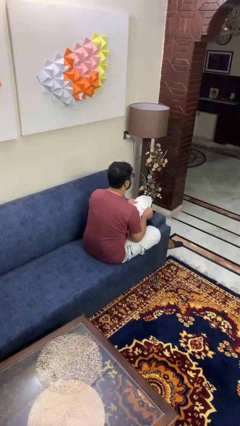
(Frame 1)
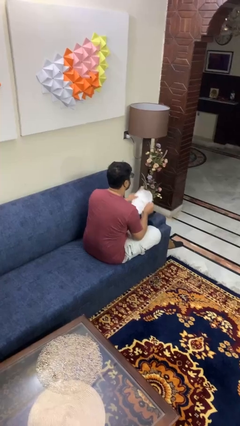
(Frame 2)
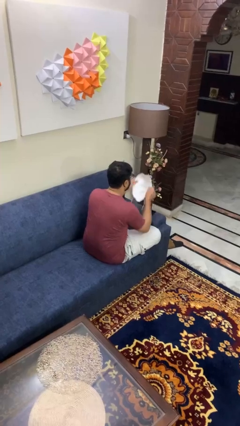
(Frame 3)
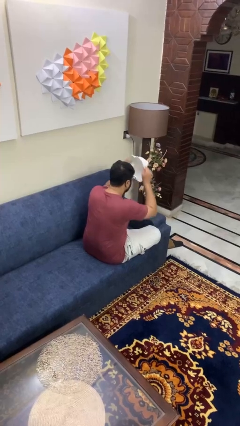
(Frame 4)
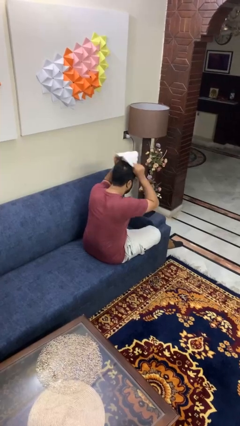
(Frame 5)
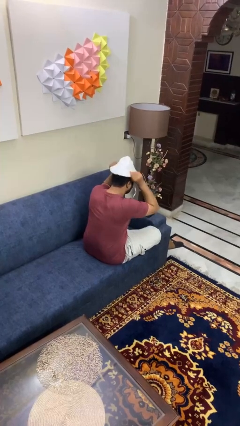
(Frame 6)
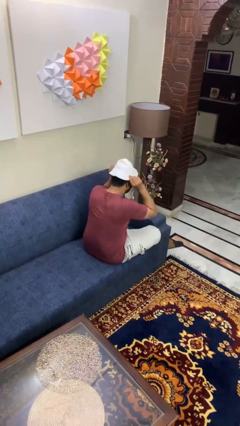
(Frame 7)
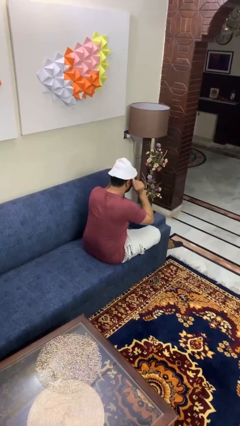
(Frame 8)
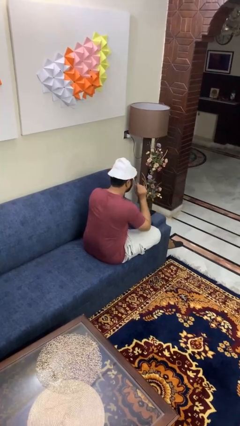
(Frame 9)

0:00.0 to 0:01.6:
person puts on hat

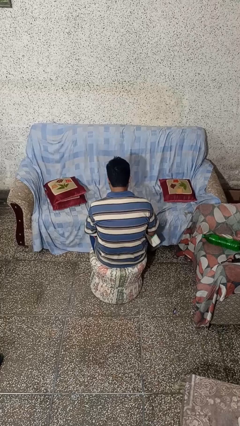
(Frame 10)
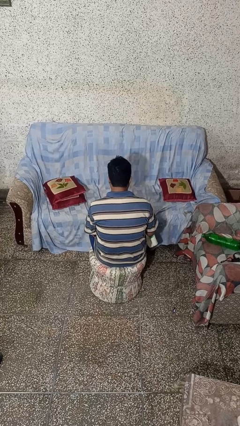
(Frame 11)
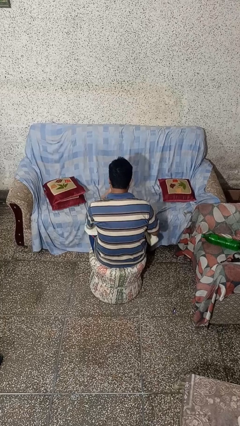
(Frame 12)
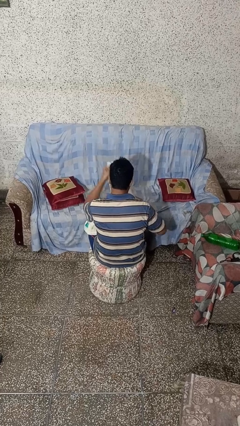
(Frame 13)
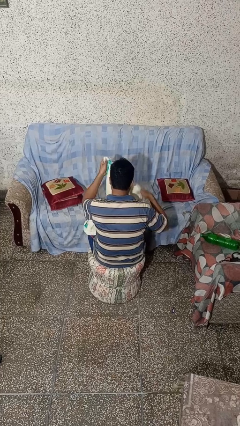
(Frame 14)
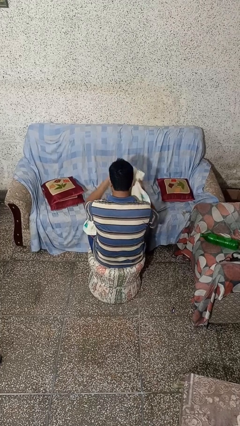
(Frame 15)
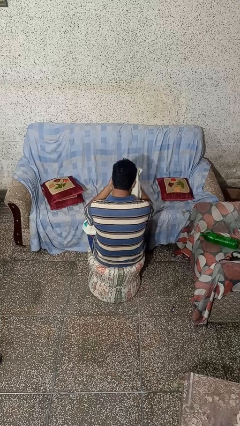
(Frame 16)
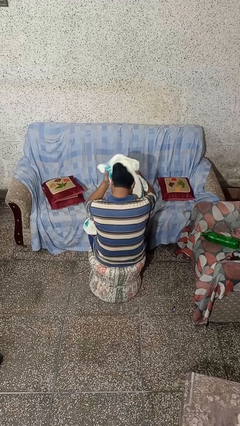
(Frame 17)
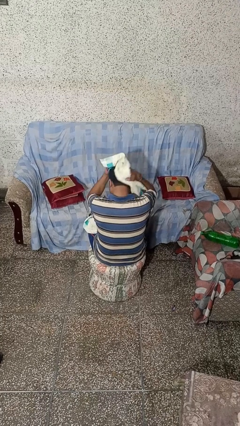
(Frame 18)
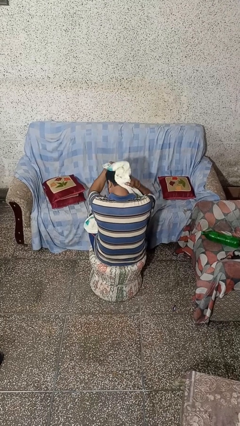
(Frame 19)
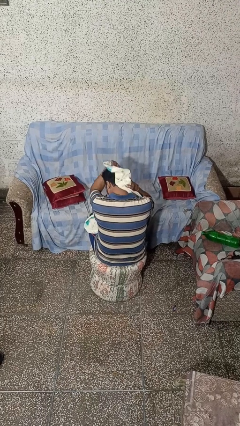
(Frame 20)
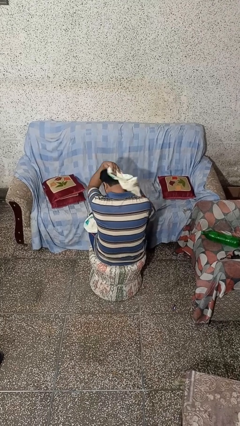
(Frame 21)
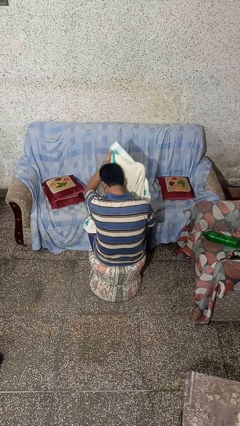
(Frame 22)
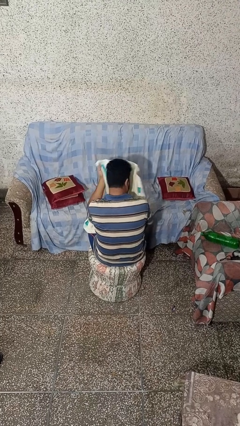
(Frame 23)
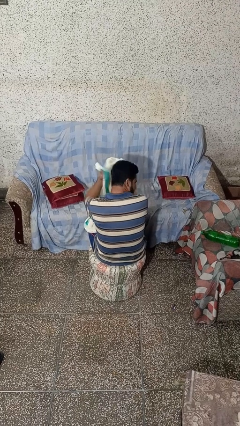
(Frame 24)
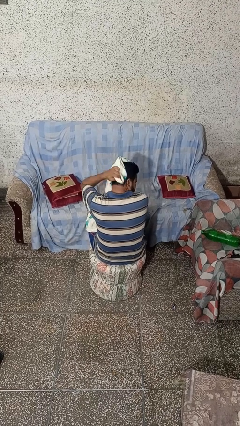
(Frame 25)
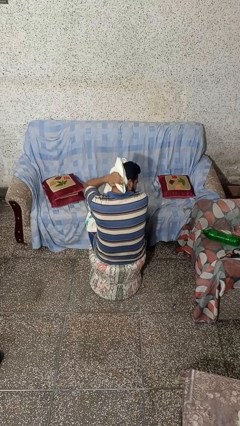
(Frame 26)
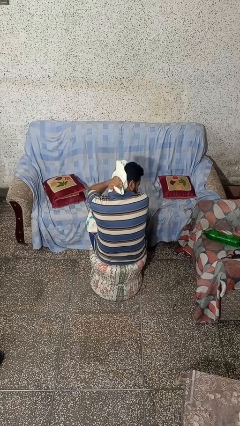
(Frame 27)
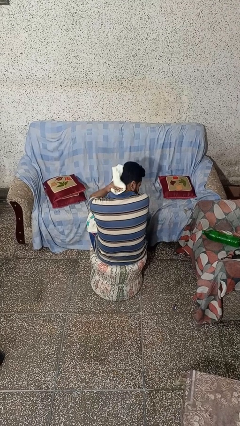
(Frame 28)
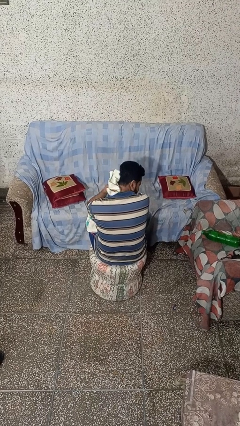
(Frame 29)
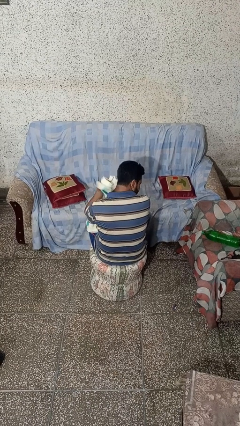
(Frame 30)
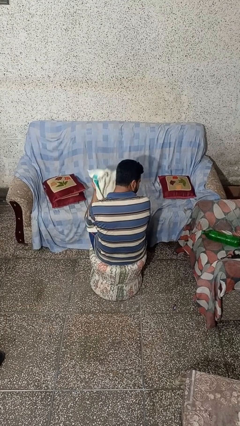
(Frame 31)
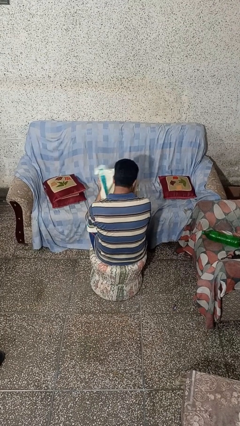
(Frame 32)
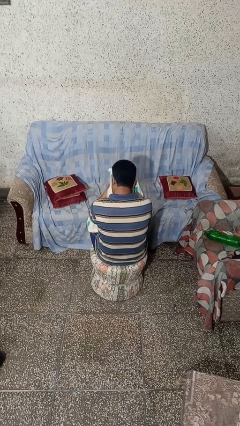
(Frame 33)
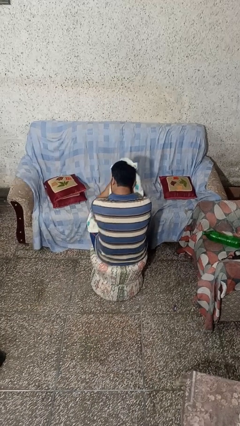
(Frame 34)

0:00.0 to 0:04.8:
person dries hair with towel

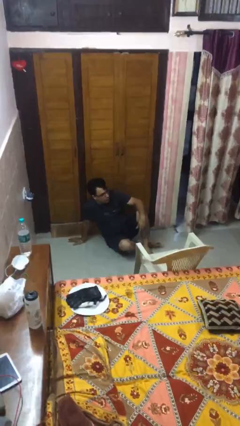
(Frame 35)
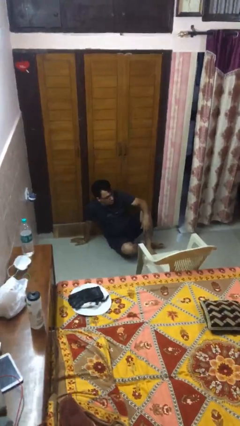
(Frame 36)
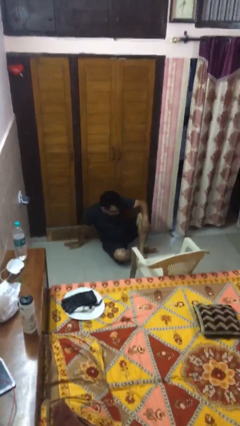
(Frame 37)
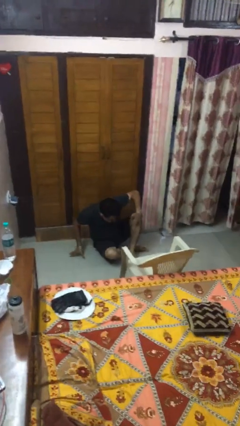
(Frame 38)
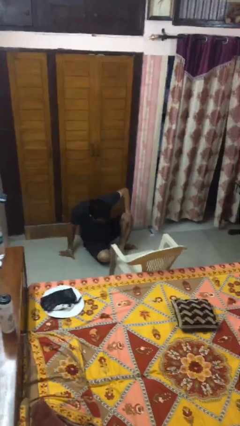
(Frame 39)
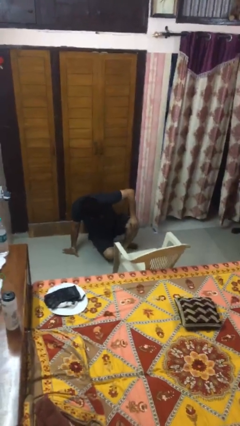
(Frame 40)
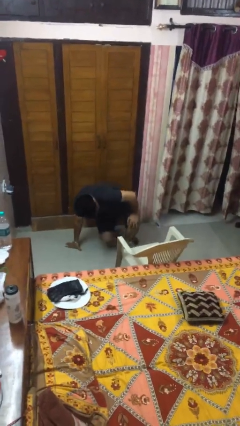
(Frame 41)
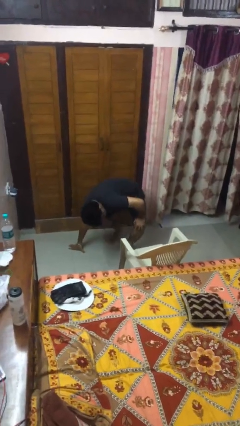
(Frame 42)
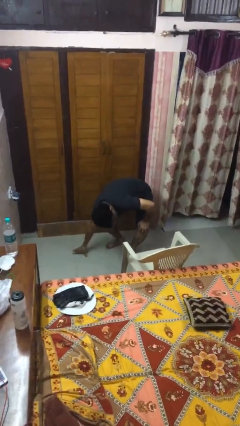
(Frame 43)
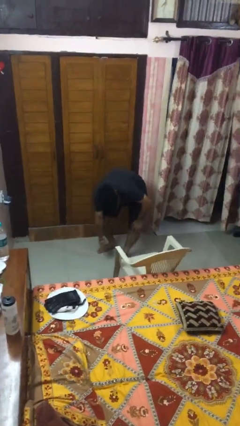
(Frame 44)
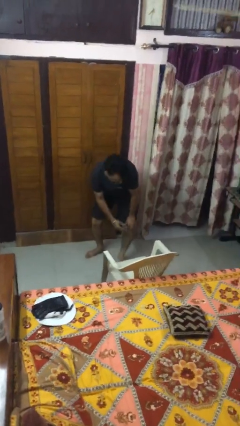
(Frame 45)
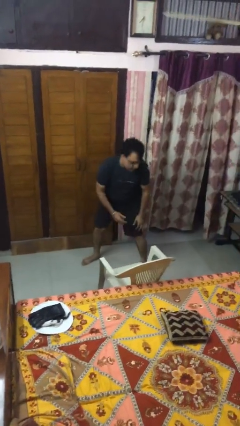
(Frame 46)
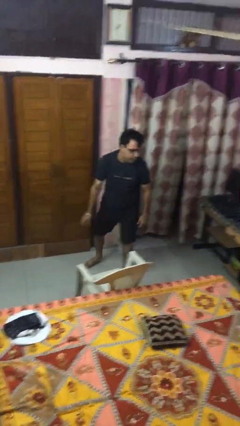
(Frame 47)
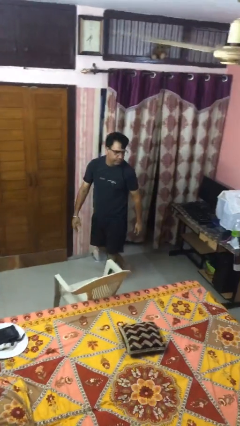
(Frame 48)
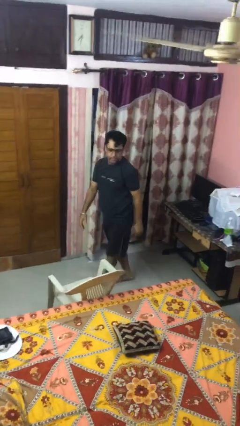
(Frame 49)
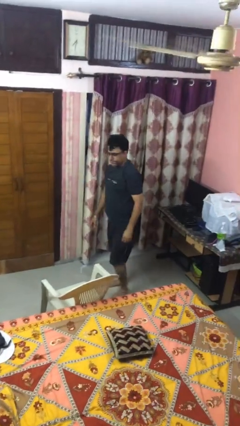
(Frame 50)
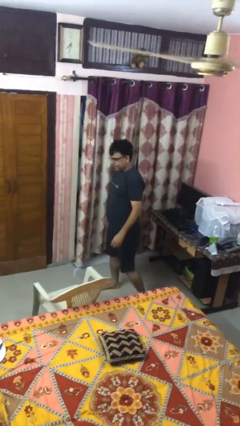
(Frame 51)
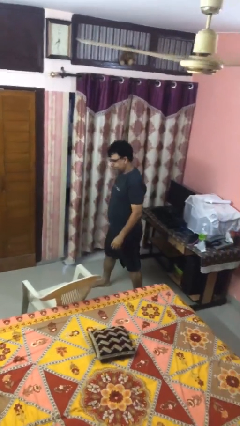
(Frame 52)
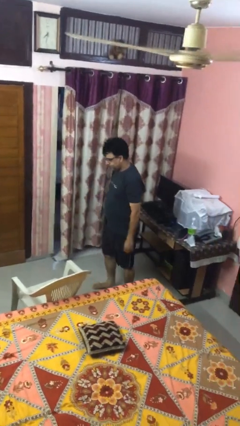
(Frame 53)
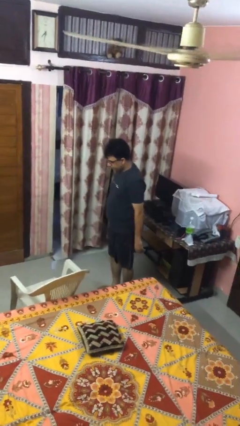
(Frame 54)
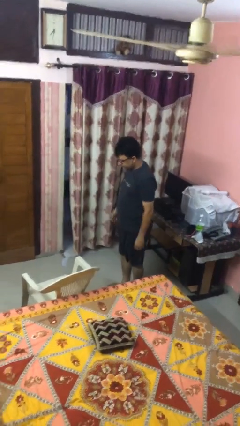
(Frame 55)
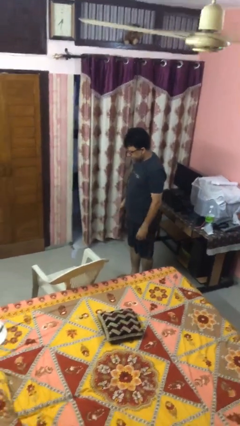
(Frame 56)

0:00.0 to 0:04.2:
person stands up from floor

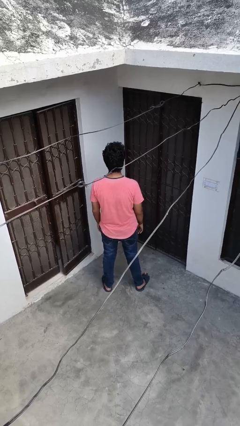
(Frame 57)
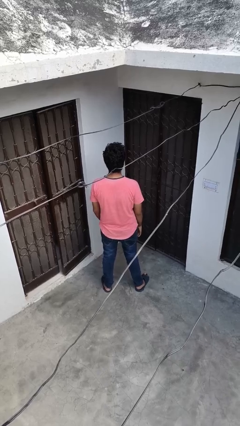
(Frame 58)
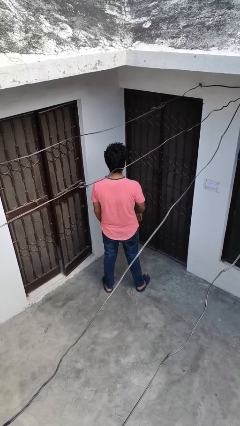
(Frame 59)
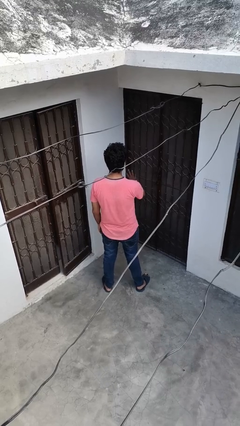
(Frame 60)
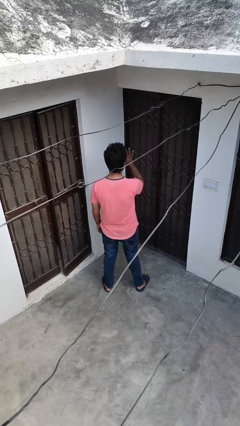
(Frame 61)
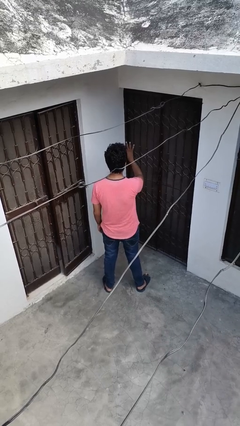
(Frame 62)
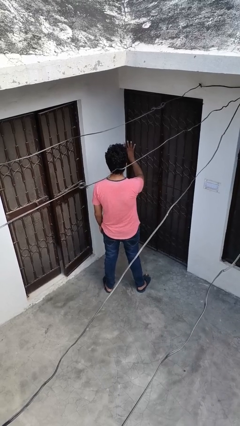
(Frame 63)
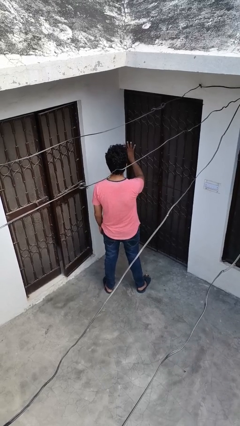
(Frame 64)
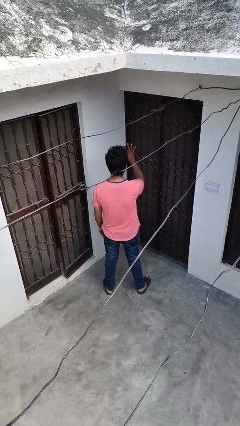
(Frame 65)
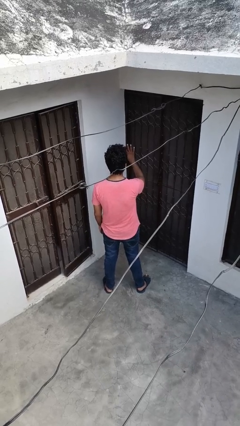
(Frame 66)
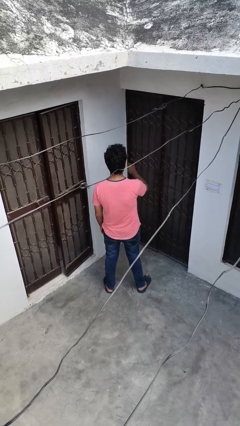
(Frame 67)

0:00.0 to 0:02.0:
person gestures number four

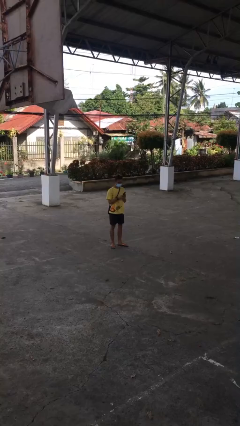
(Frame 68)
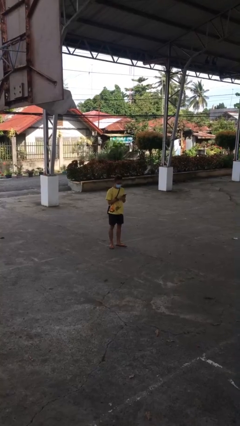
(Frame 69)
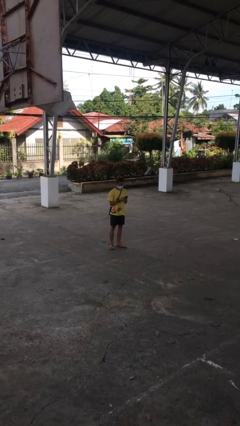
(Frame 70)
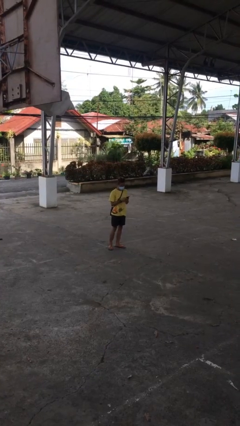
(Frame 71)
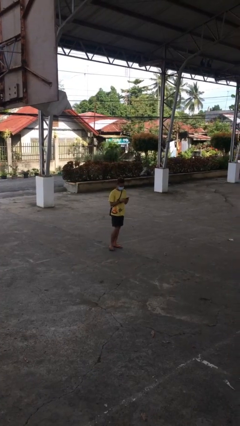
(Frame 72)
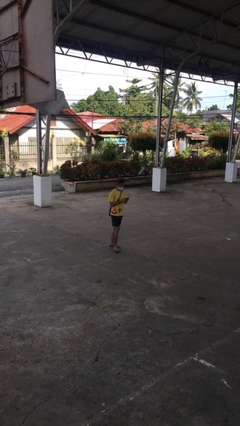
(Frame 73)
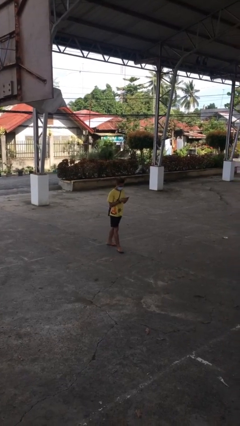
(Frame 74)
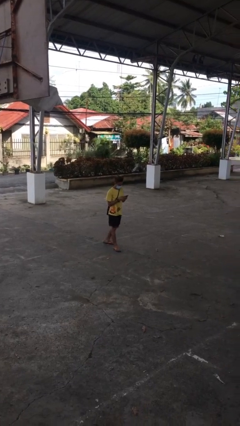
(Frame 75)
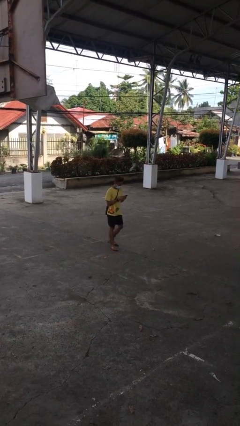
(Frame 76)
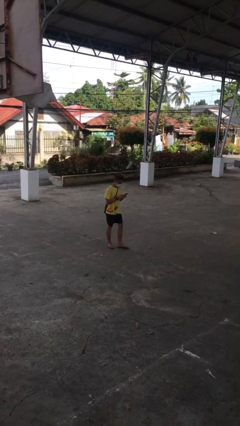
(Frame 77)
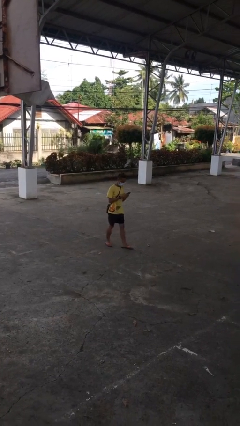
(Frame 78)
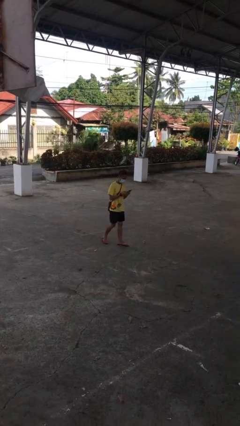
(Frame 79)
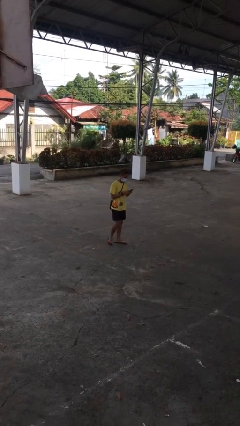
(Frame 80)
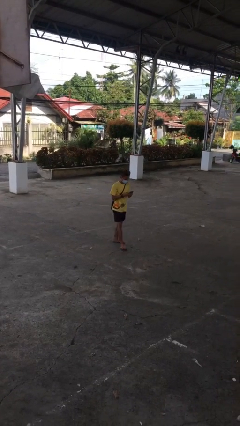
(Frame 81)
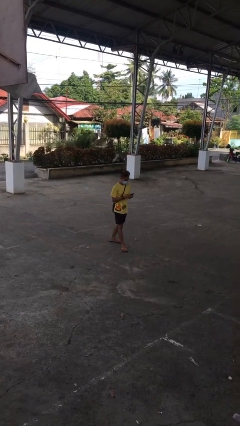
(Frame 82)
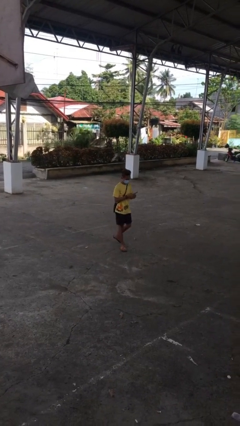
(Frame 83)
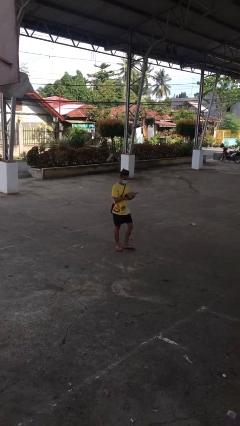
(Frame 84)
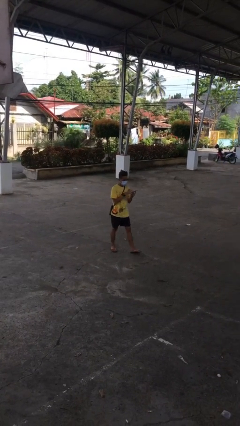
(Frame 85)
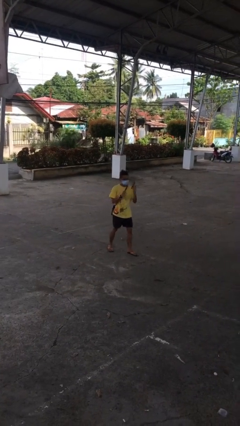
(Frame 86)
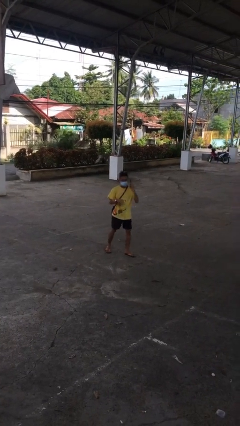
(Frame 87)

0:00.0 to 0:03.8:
person texts on phone

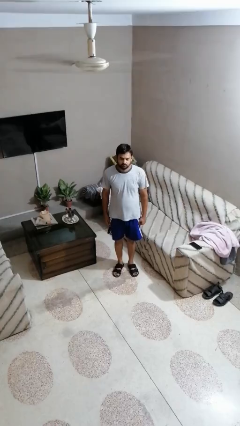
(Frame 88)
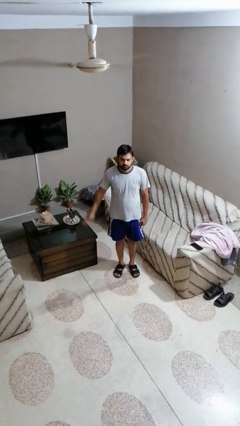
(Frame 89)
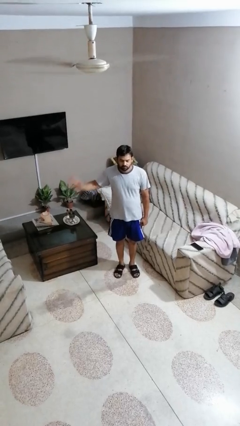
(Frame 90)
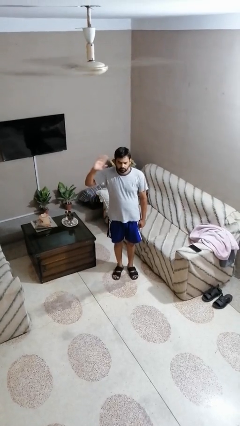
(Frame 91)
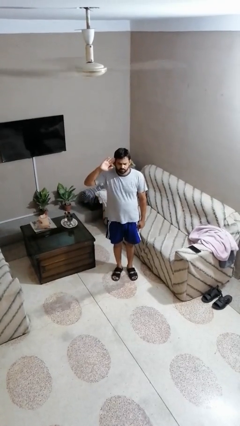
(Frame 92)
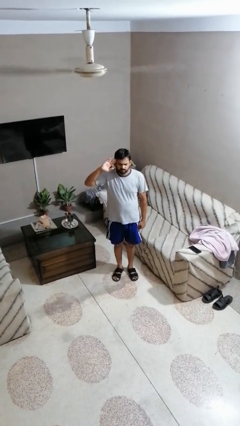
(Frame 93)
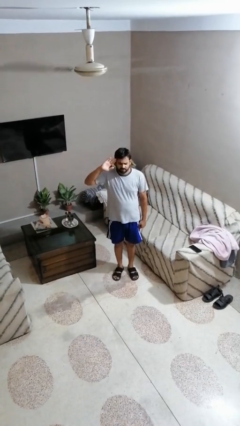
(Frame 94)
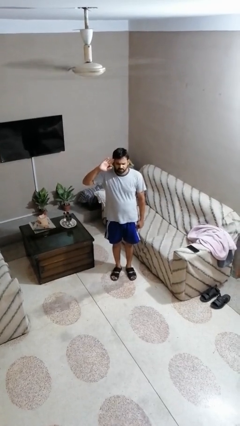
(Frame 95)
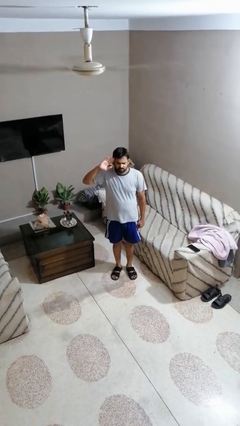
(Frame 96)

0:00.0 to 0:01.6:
person salutes
